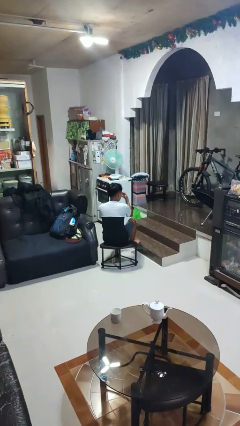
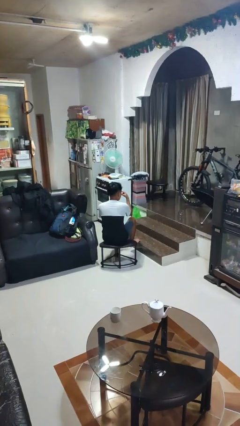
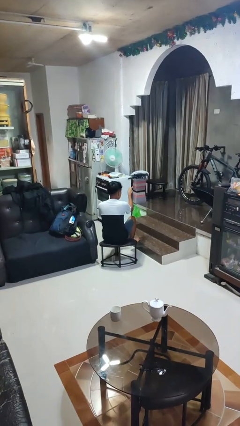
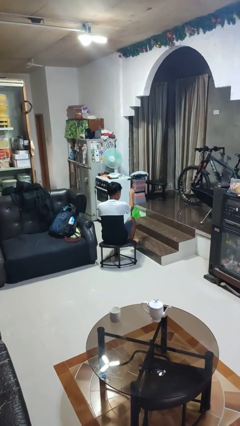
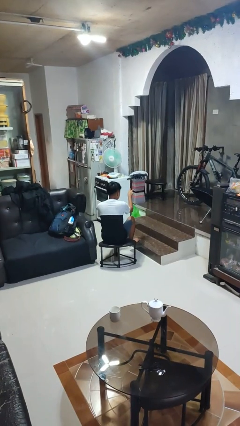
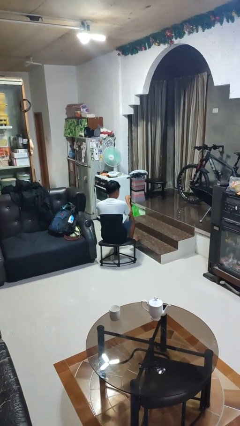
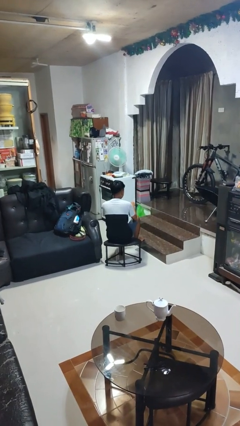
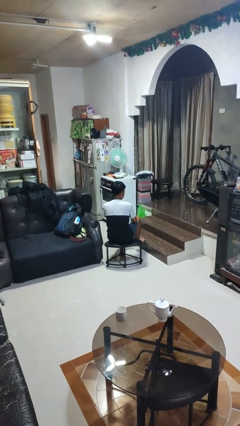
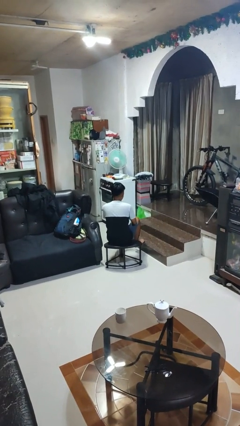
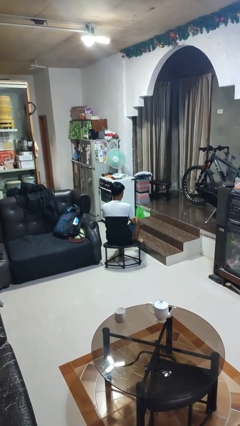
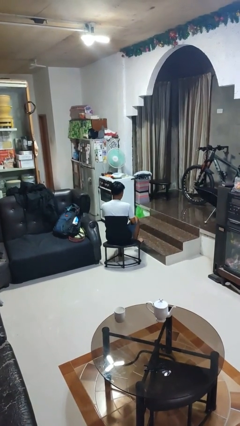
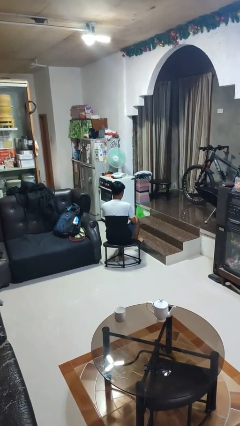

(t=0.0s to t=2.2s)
person gestures watch closely

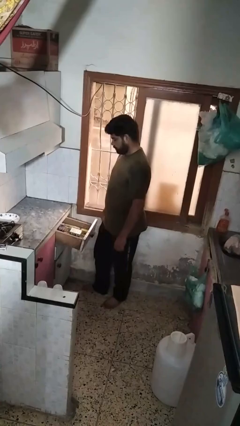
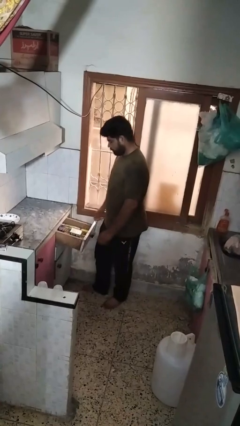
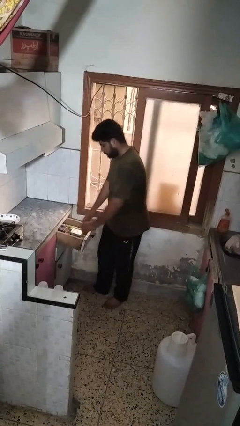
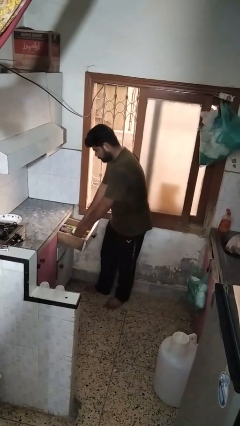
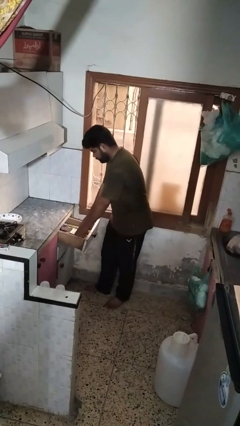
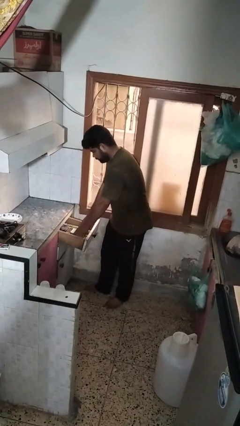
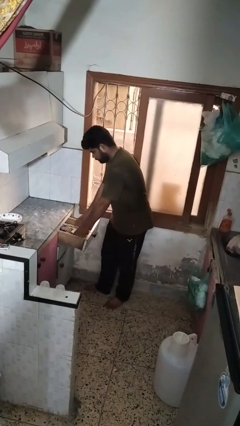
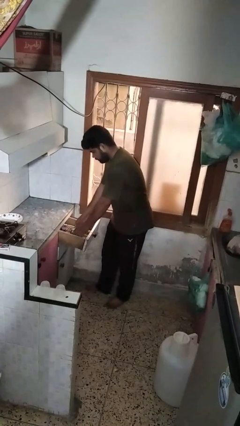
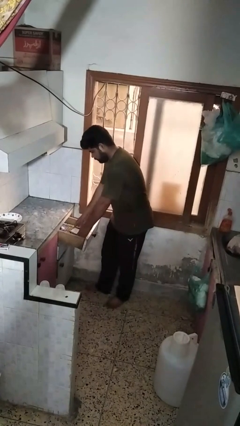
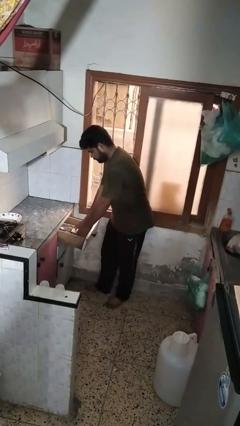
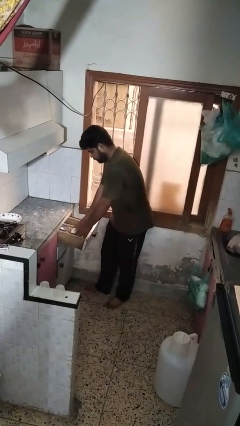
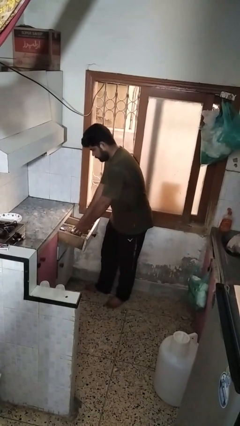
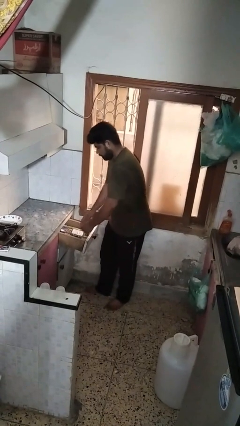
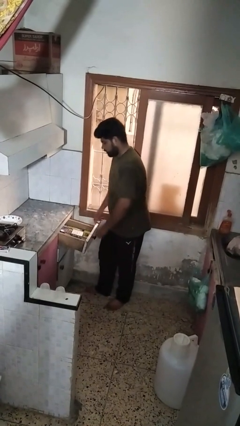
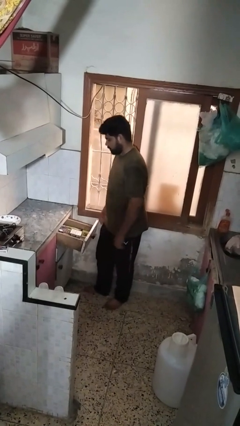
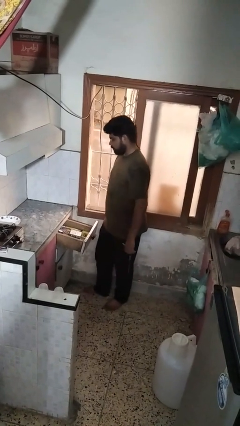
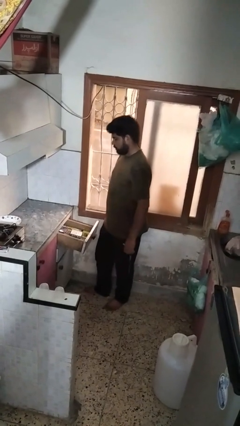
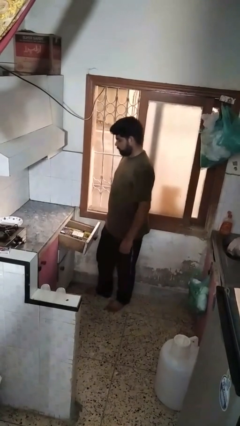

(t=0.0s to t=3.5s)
person searches in kitchen drawer

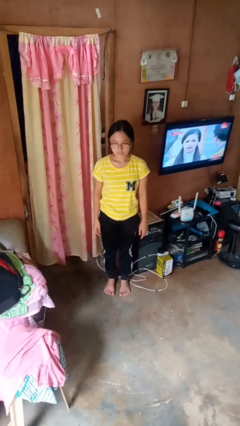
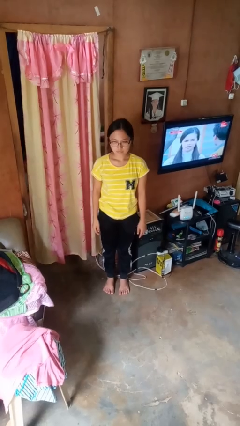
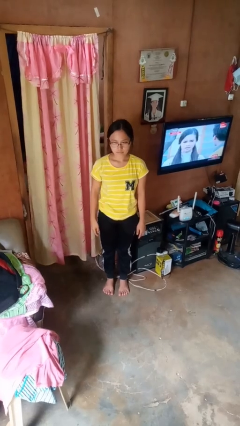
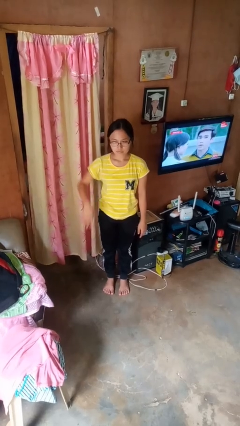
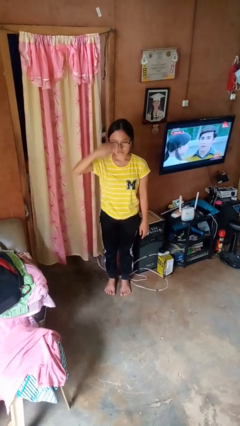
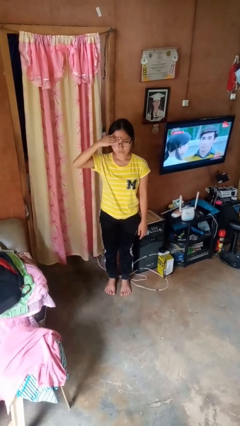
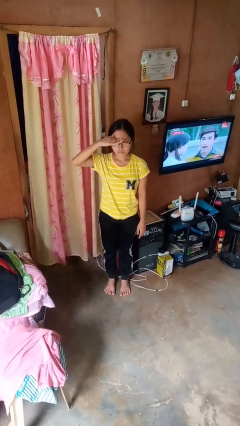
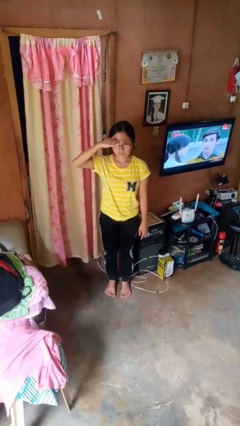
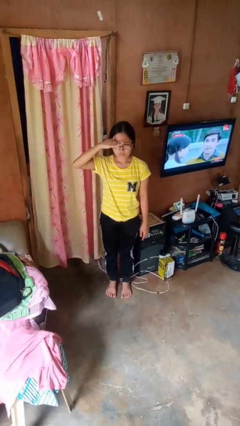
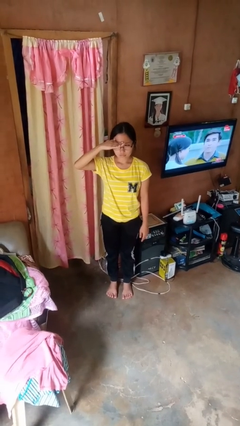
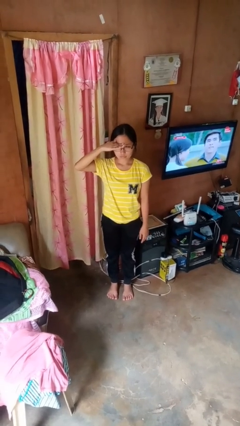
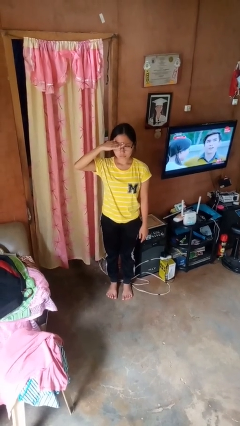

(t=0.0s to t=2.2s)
person salutes

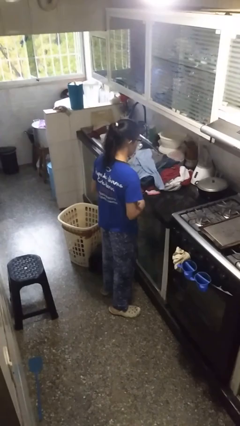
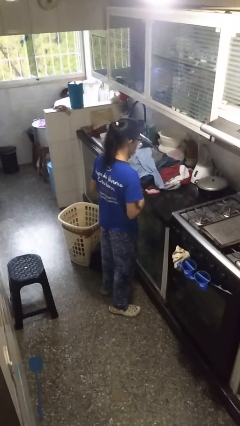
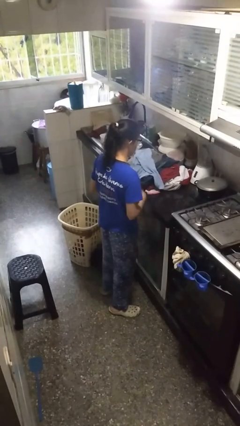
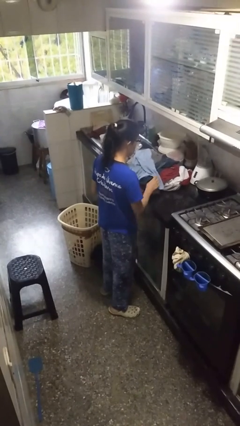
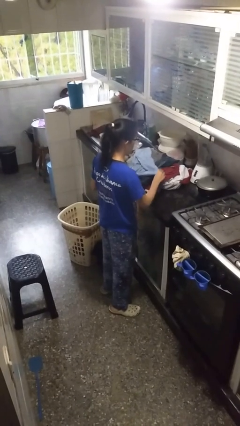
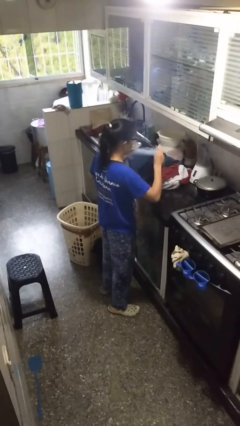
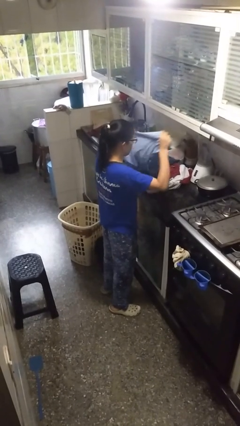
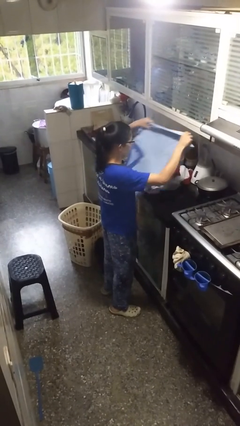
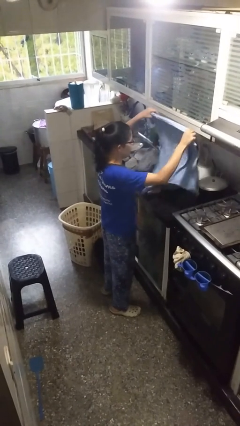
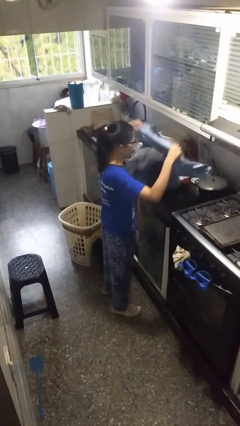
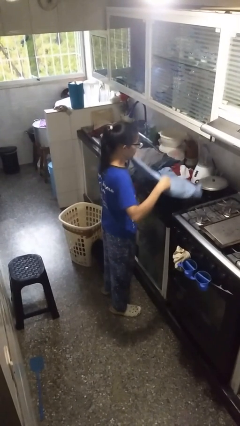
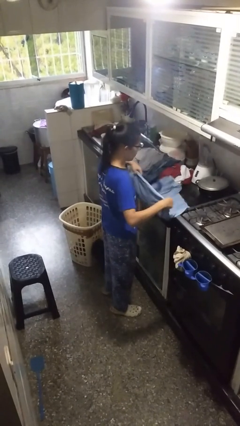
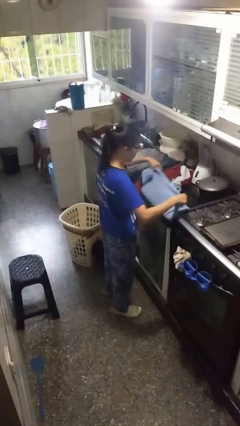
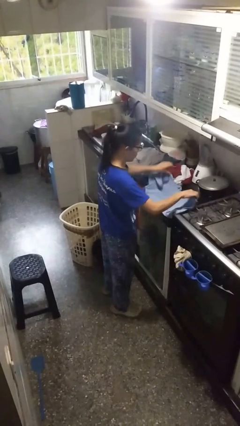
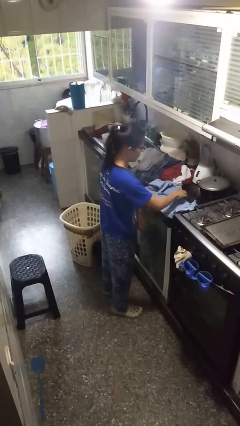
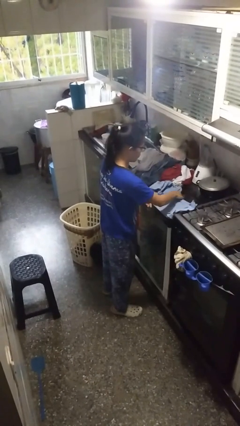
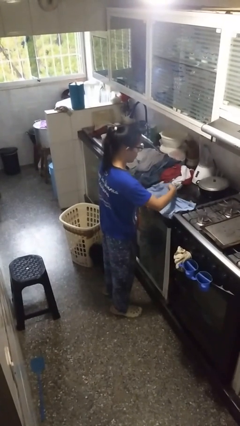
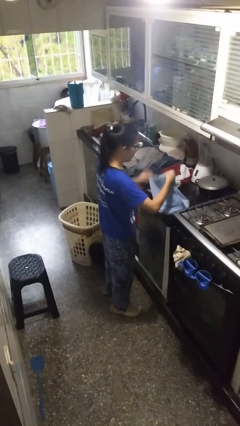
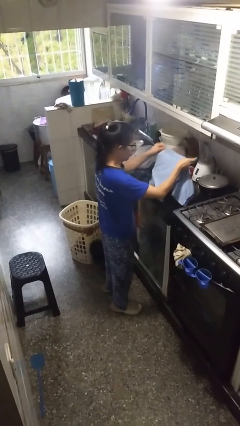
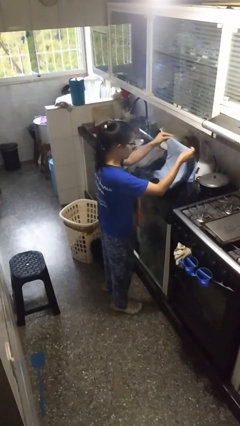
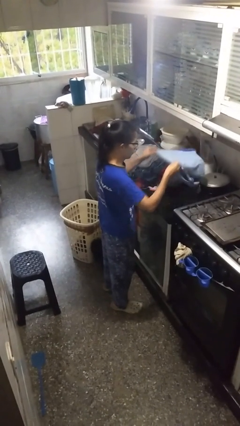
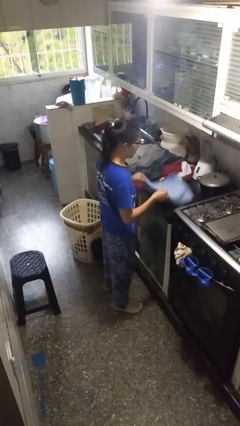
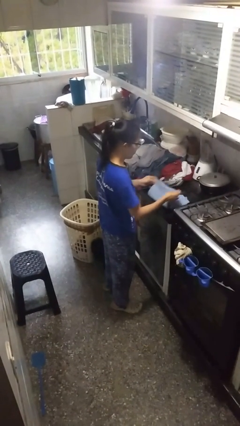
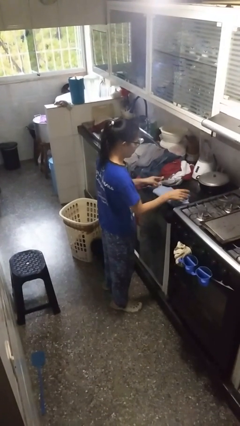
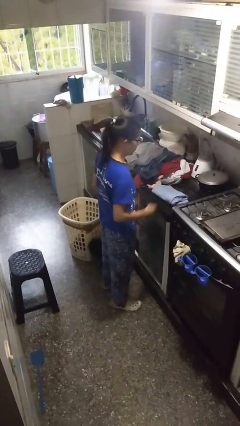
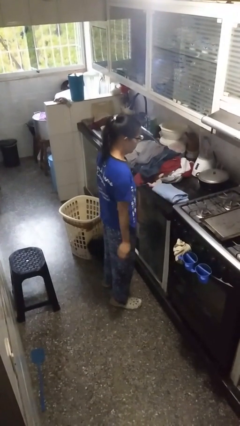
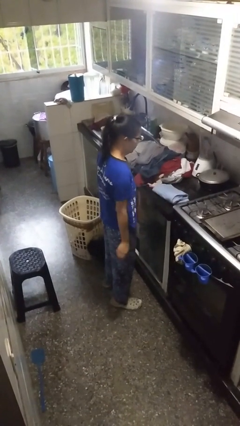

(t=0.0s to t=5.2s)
person folds shirt

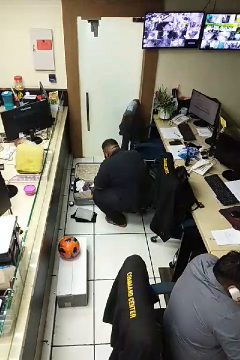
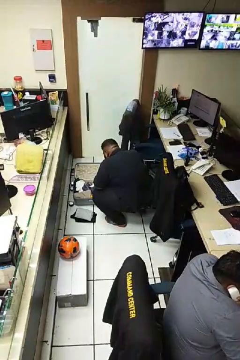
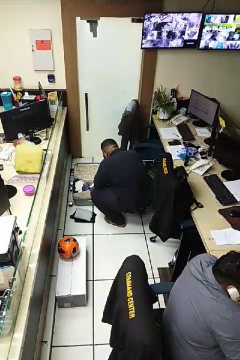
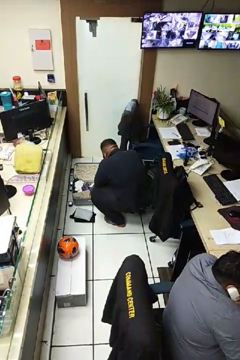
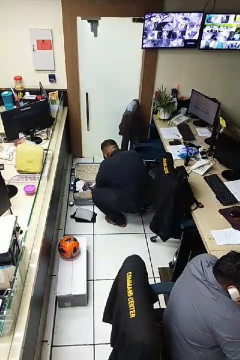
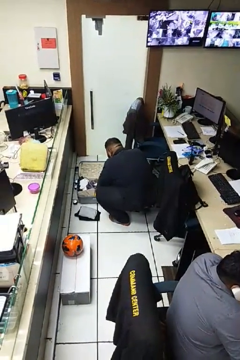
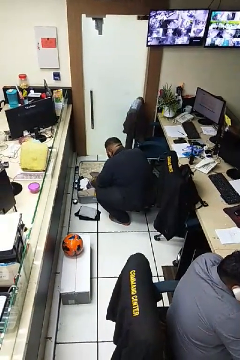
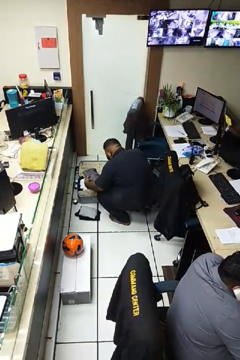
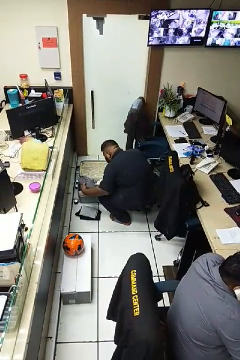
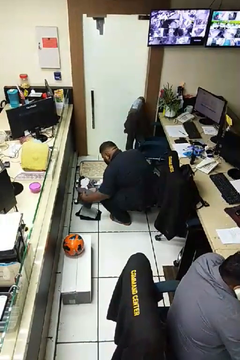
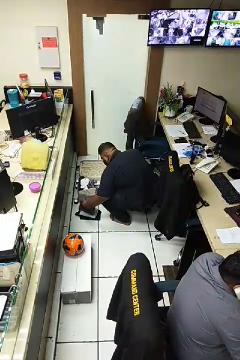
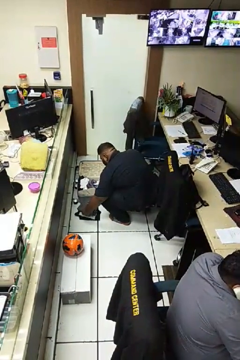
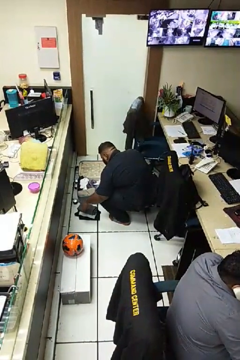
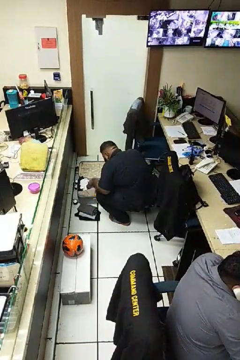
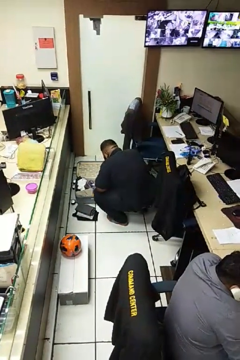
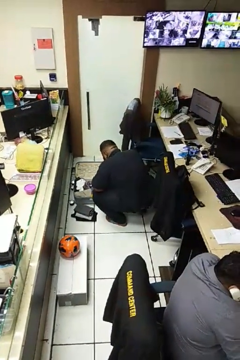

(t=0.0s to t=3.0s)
person unloads clothes from suitcase

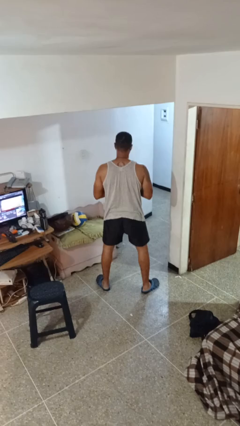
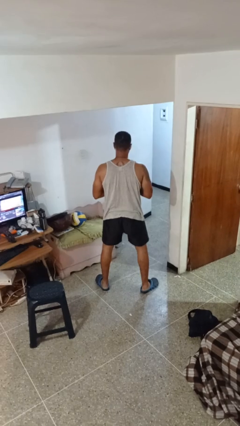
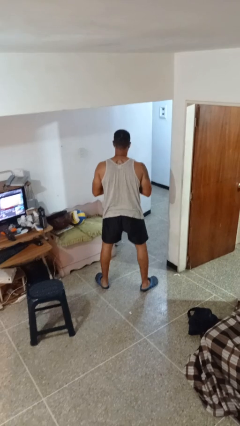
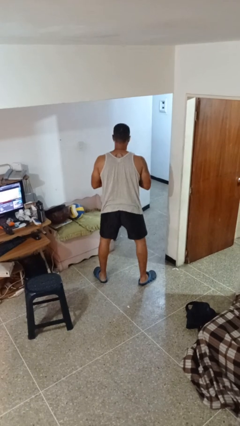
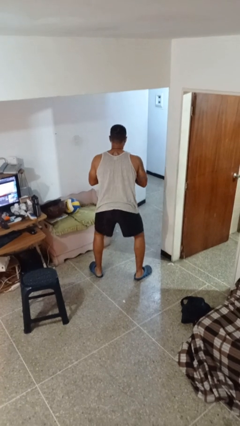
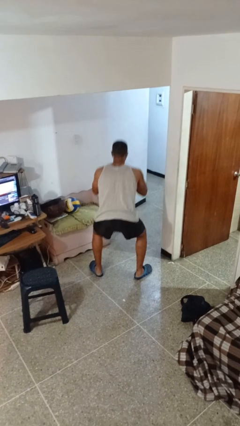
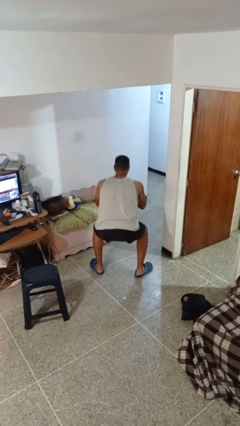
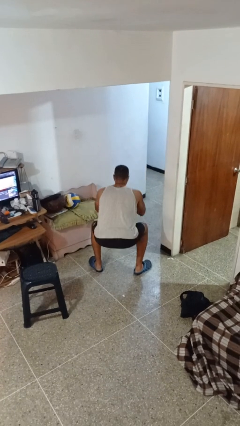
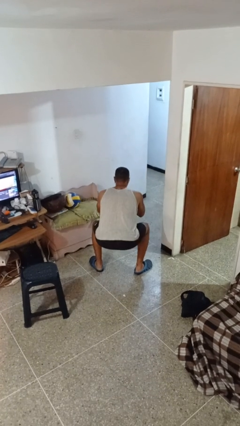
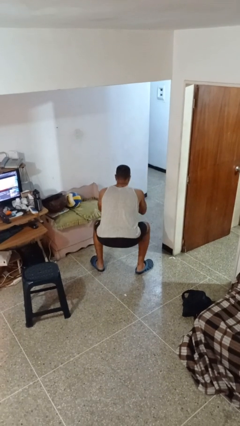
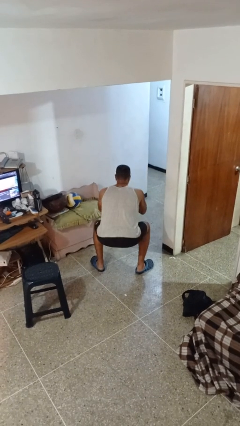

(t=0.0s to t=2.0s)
person squats
